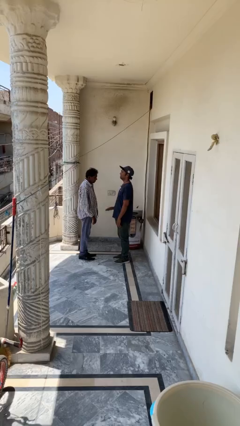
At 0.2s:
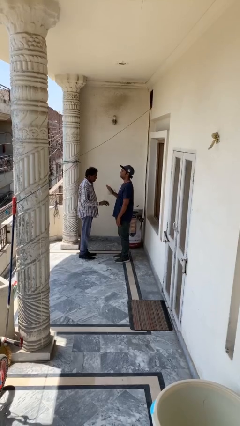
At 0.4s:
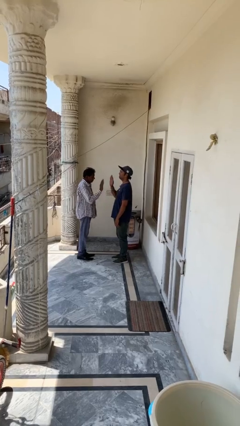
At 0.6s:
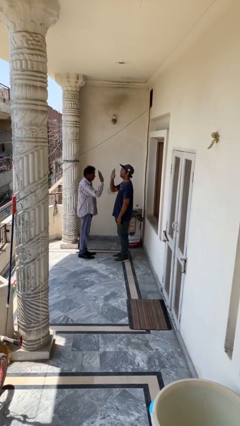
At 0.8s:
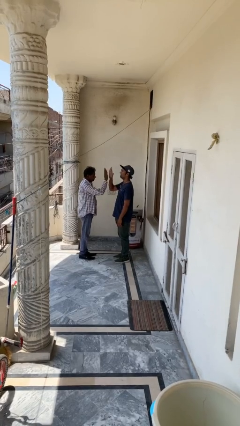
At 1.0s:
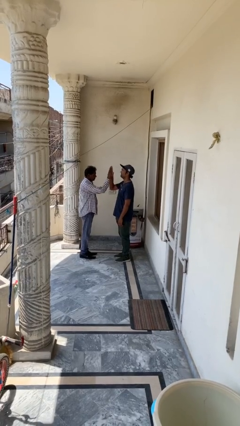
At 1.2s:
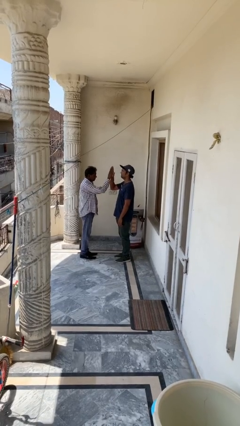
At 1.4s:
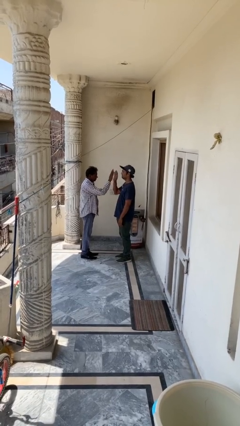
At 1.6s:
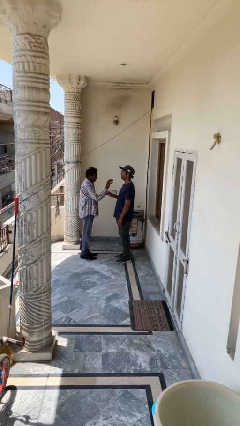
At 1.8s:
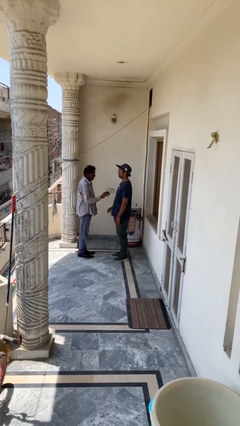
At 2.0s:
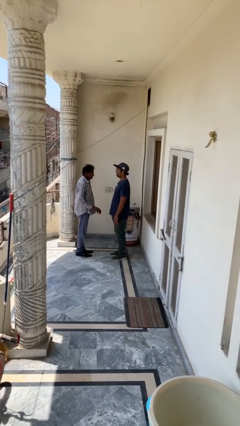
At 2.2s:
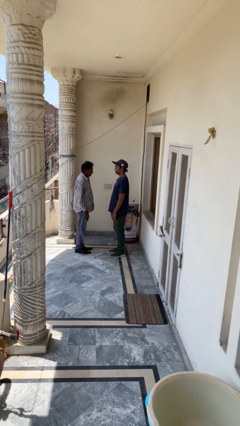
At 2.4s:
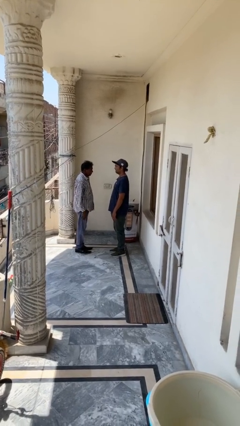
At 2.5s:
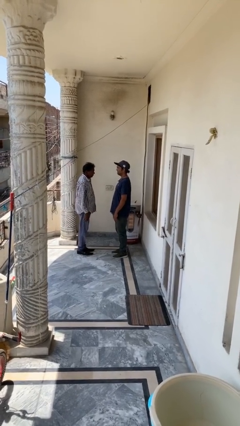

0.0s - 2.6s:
person highfives hand

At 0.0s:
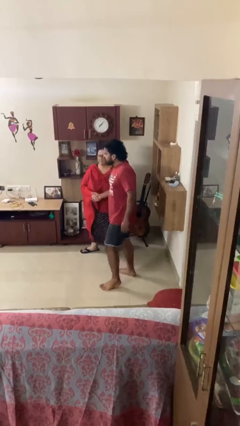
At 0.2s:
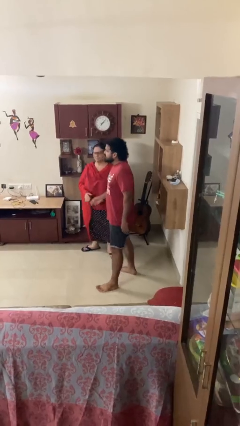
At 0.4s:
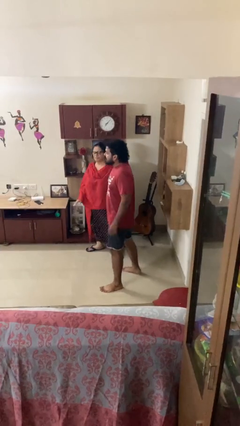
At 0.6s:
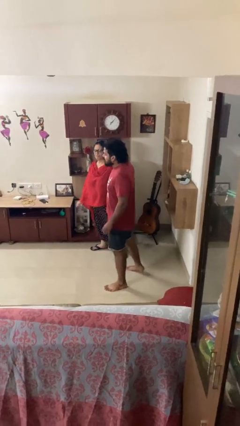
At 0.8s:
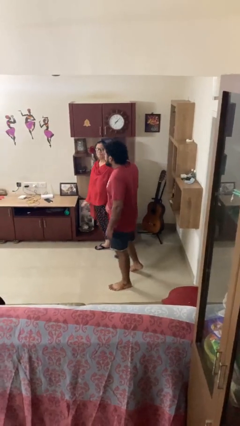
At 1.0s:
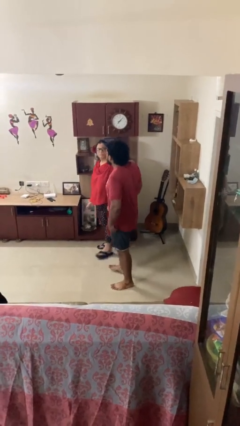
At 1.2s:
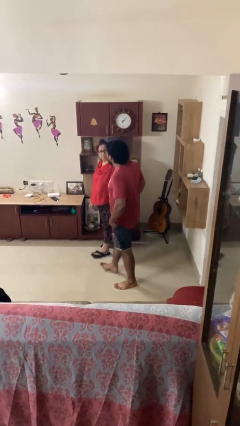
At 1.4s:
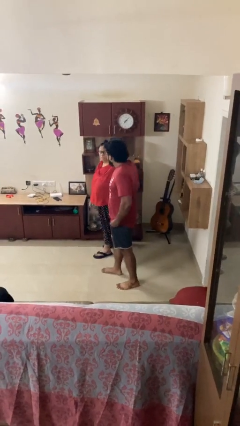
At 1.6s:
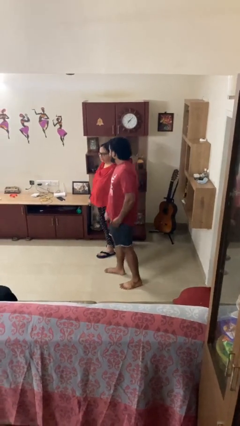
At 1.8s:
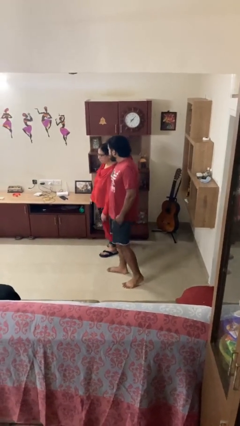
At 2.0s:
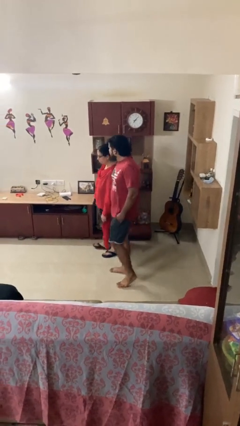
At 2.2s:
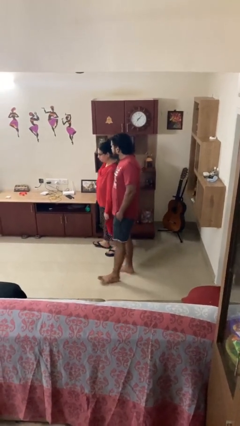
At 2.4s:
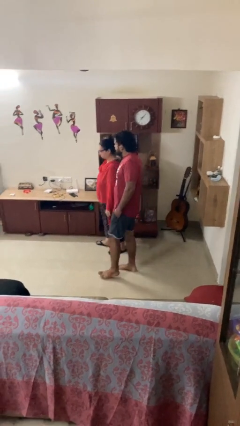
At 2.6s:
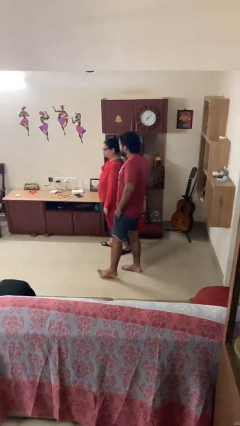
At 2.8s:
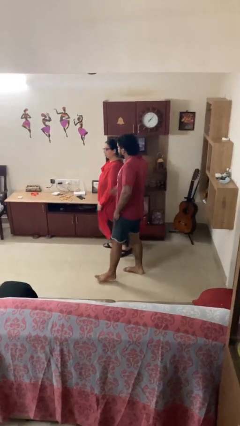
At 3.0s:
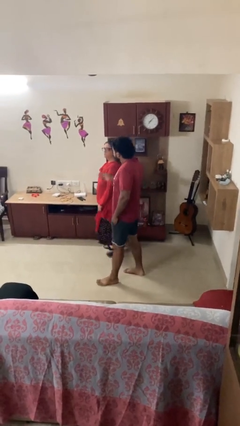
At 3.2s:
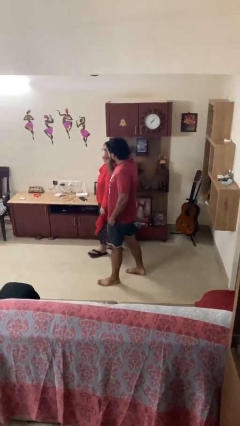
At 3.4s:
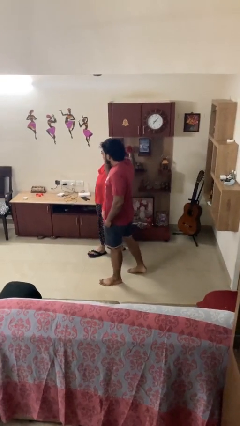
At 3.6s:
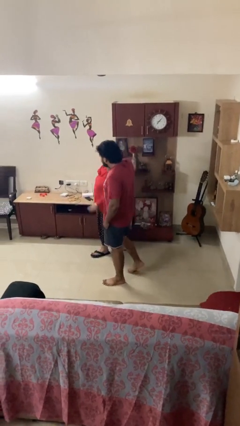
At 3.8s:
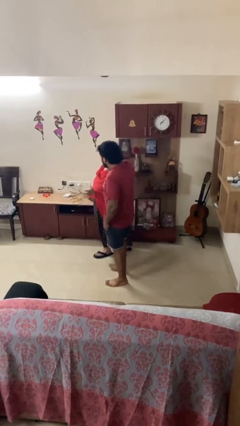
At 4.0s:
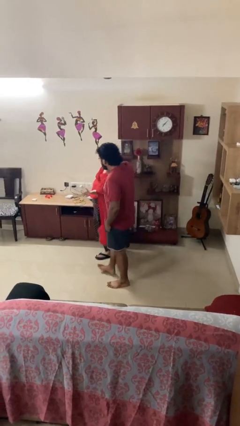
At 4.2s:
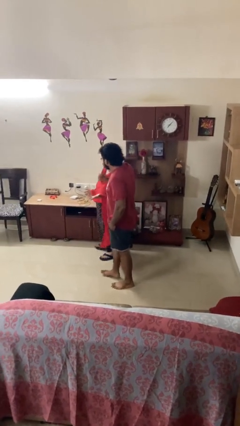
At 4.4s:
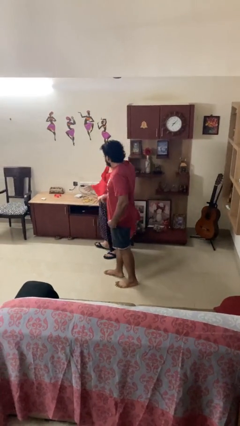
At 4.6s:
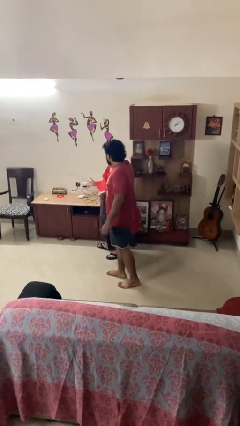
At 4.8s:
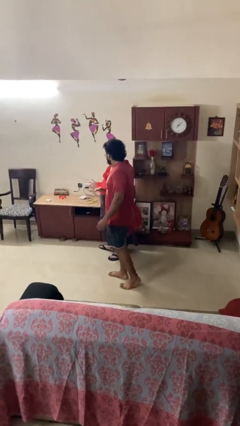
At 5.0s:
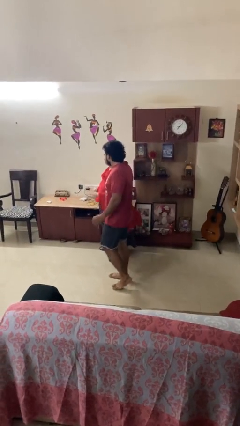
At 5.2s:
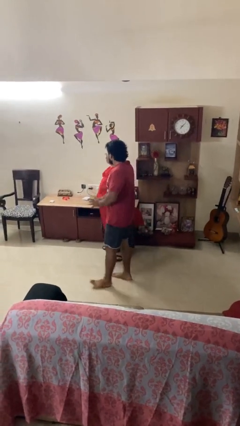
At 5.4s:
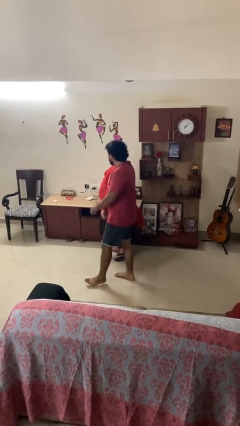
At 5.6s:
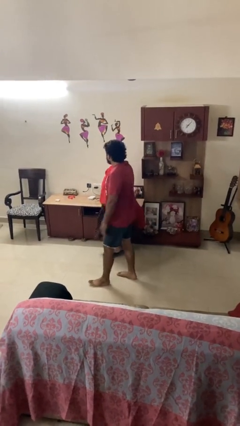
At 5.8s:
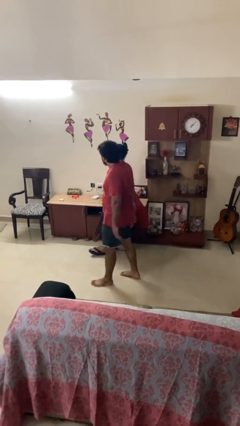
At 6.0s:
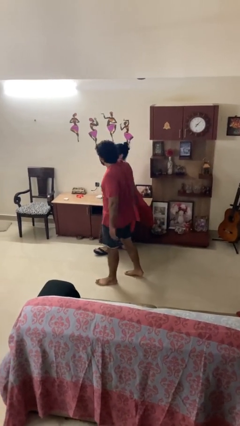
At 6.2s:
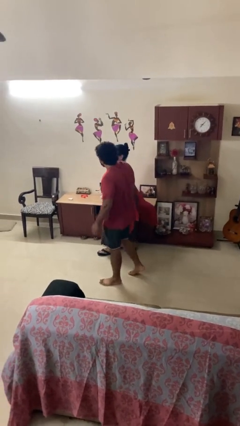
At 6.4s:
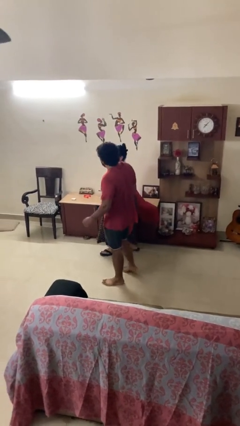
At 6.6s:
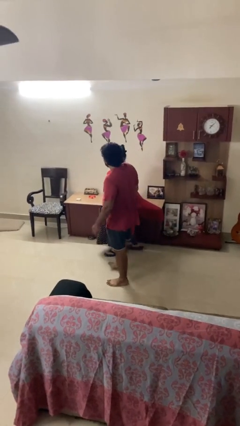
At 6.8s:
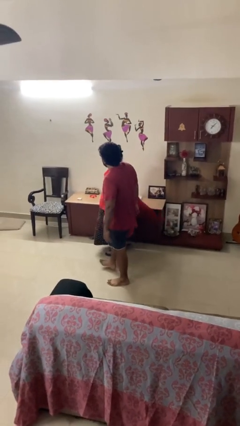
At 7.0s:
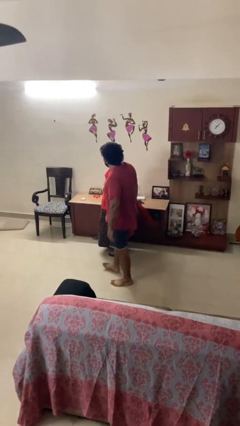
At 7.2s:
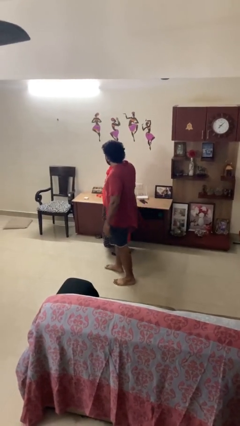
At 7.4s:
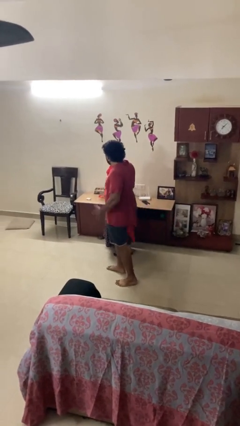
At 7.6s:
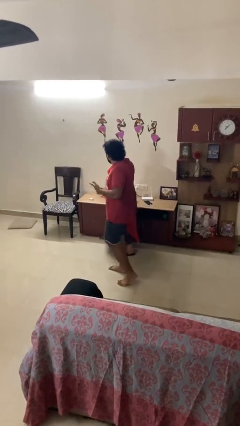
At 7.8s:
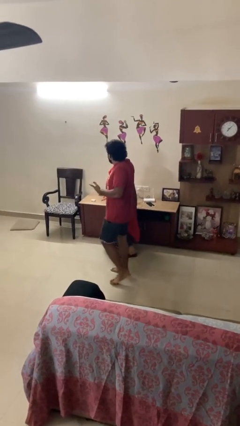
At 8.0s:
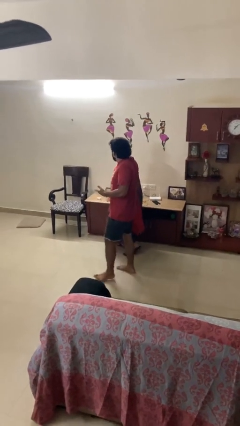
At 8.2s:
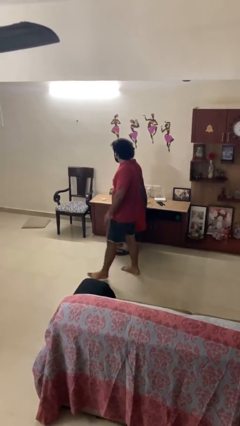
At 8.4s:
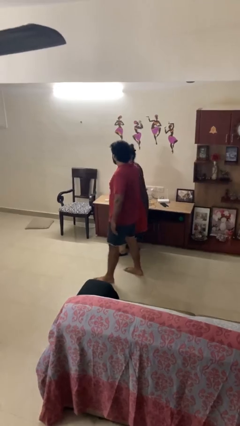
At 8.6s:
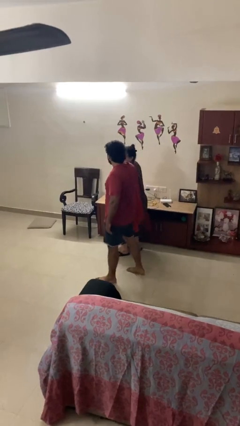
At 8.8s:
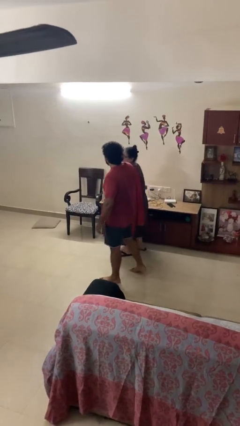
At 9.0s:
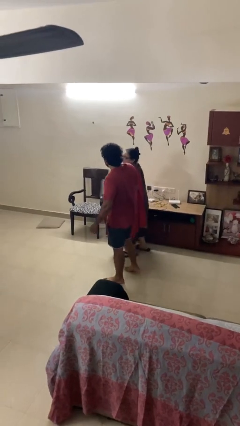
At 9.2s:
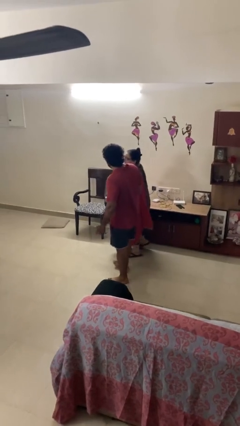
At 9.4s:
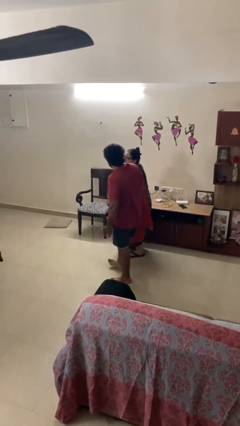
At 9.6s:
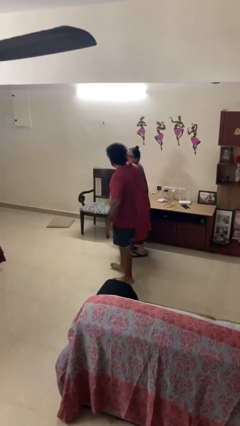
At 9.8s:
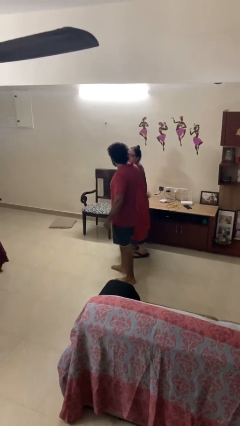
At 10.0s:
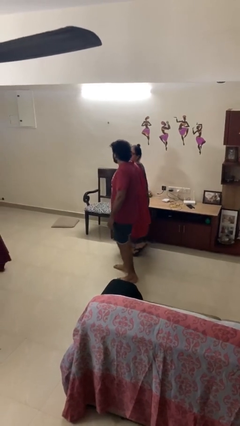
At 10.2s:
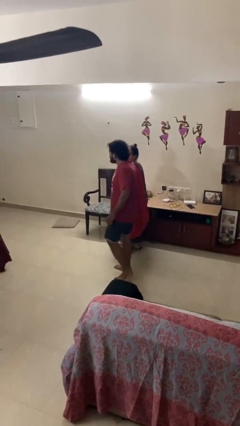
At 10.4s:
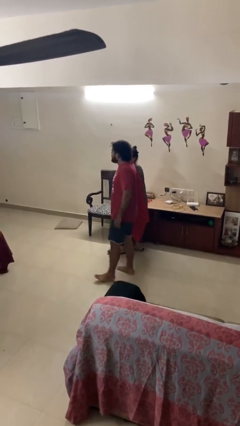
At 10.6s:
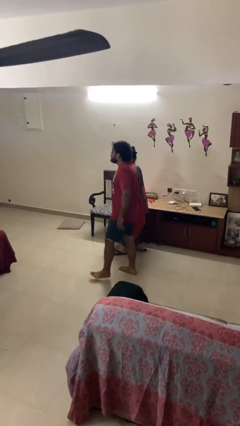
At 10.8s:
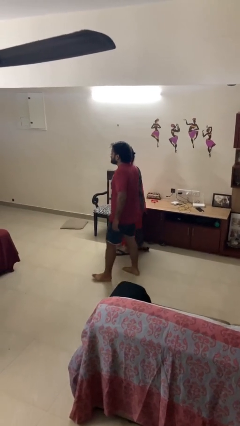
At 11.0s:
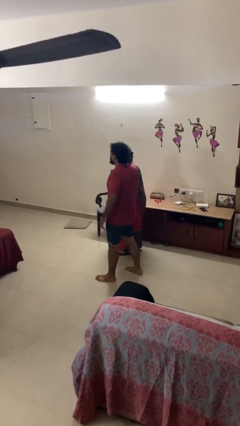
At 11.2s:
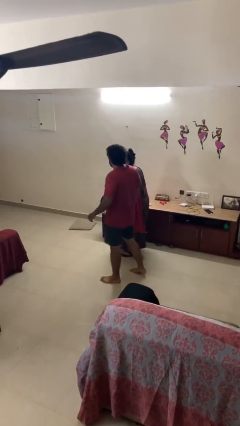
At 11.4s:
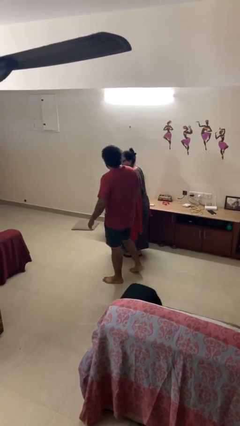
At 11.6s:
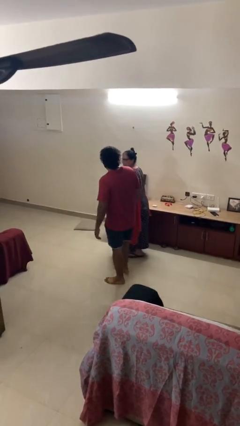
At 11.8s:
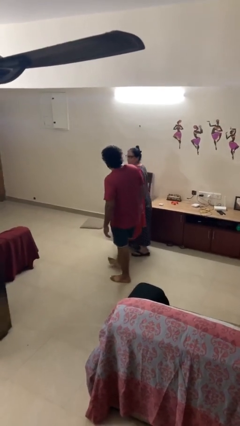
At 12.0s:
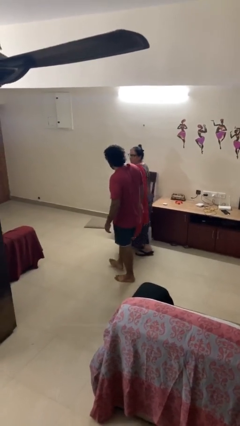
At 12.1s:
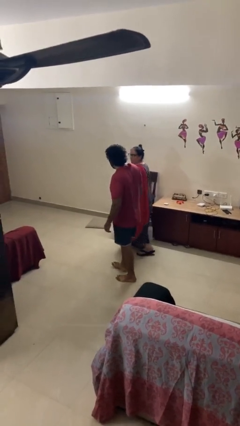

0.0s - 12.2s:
person talks to person

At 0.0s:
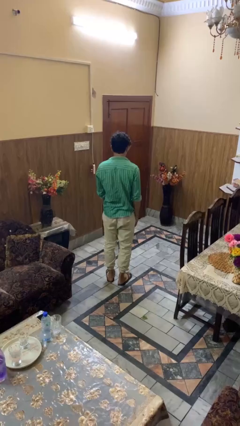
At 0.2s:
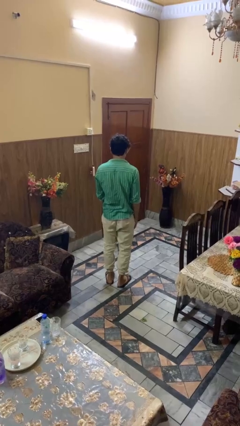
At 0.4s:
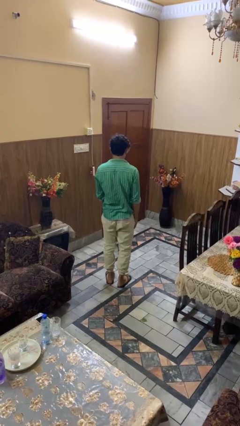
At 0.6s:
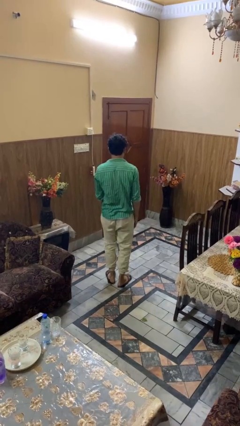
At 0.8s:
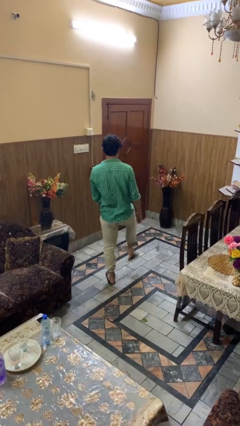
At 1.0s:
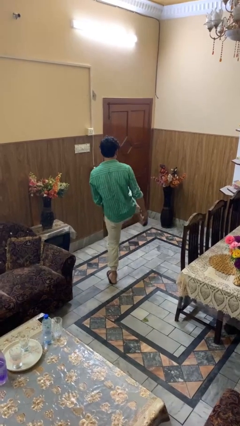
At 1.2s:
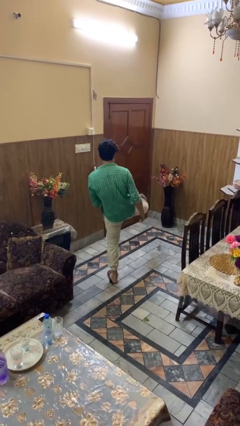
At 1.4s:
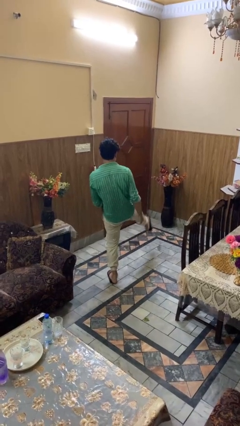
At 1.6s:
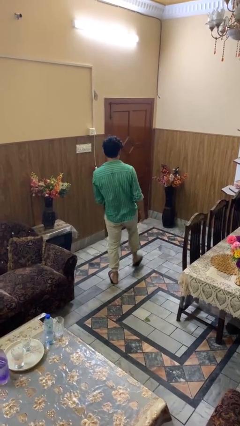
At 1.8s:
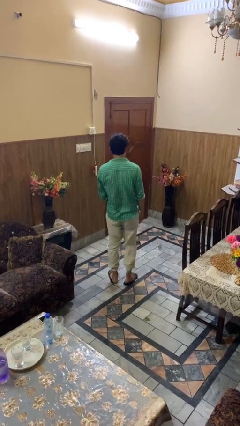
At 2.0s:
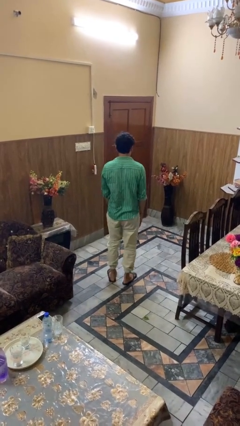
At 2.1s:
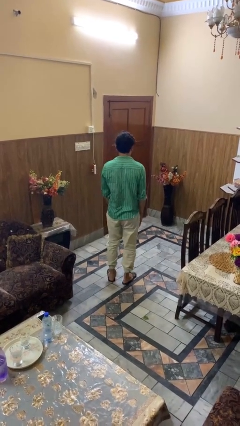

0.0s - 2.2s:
person karate kicks

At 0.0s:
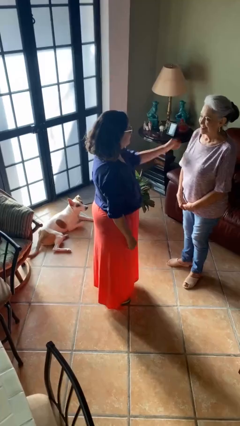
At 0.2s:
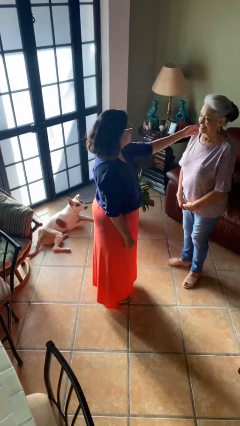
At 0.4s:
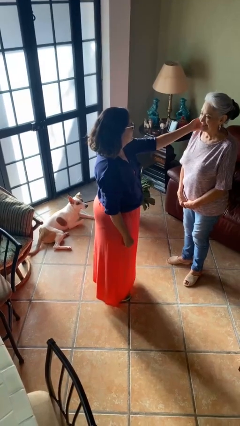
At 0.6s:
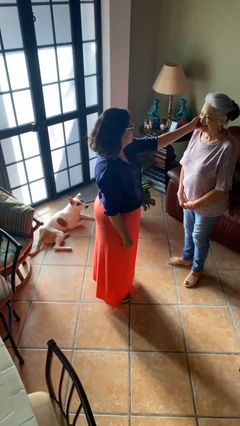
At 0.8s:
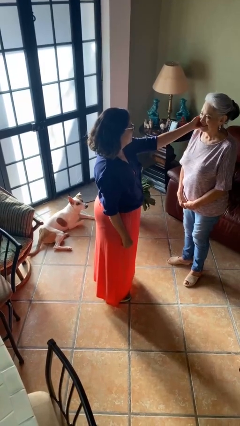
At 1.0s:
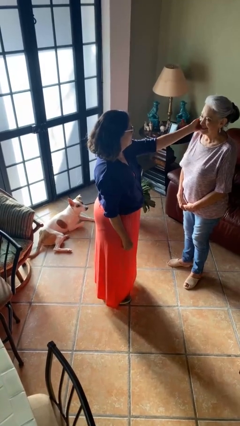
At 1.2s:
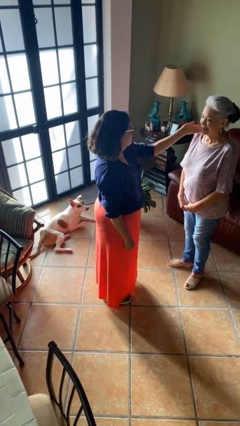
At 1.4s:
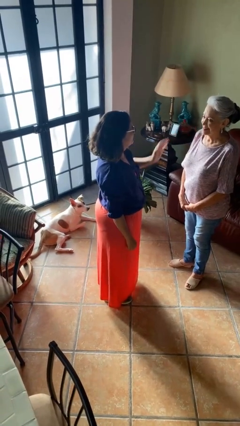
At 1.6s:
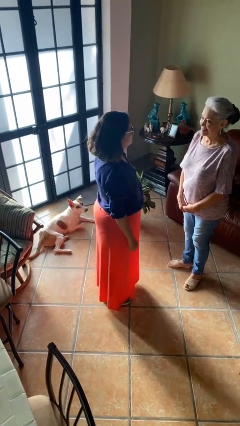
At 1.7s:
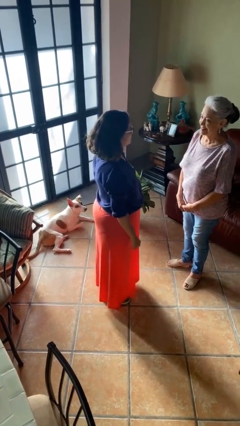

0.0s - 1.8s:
person touches face of person
